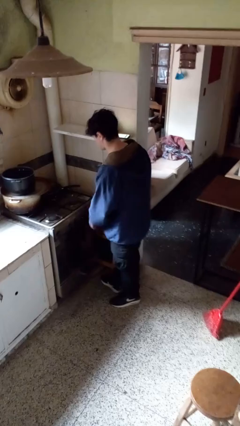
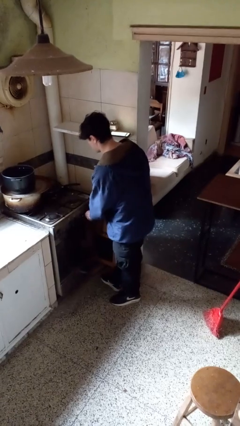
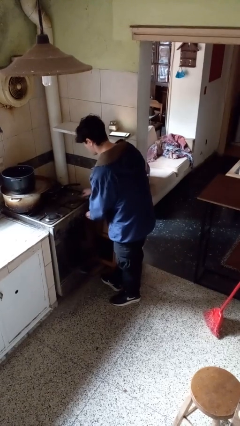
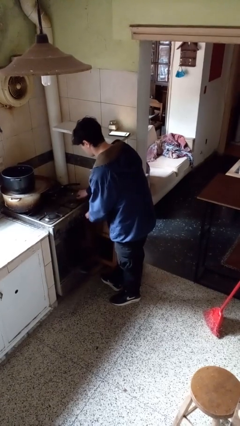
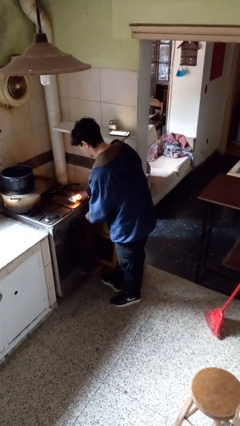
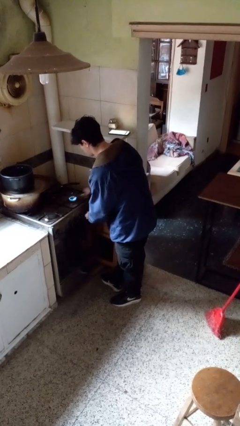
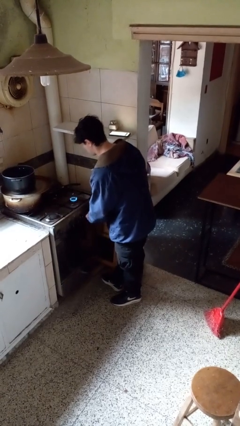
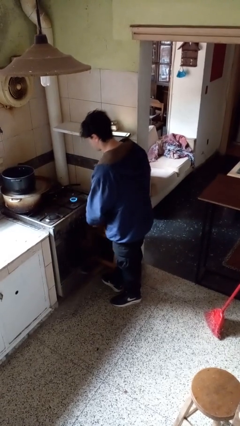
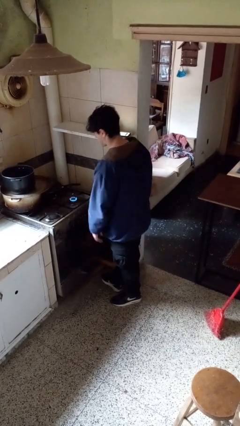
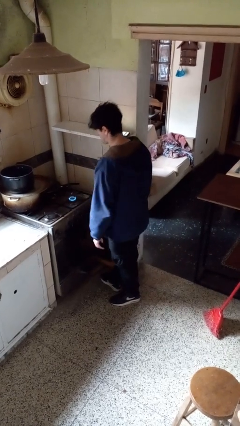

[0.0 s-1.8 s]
person turns on stovetop

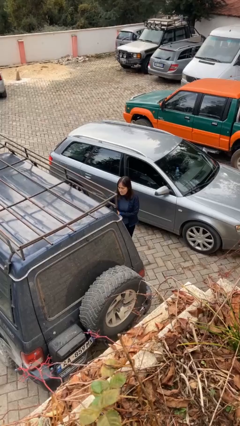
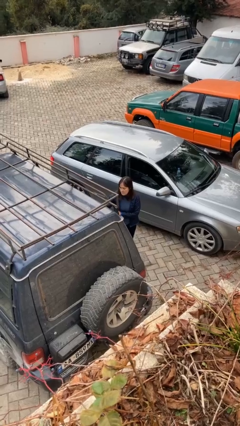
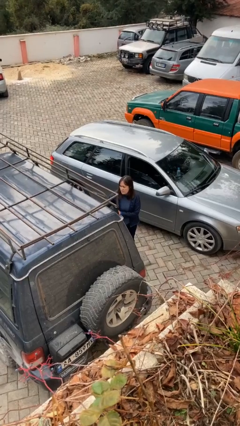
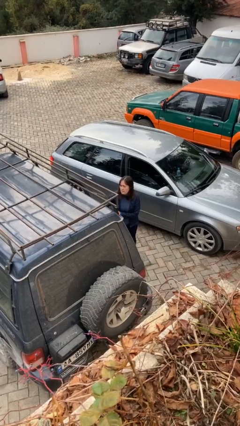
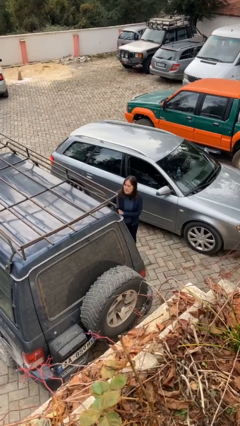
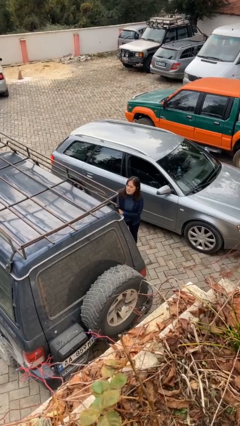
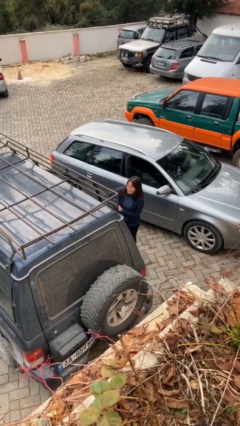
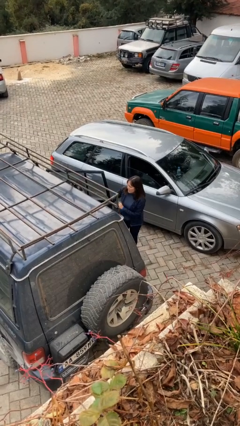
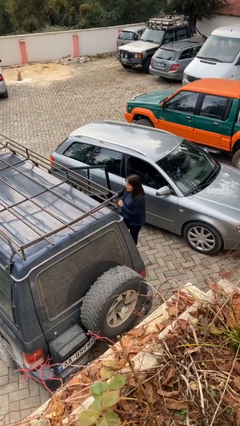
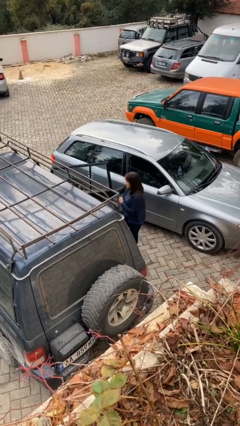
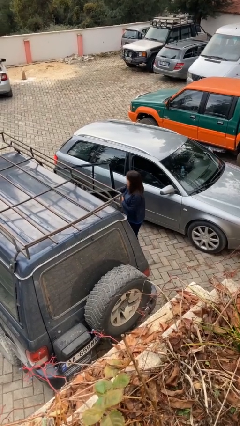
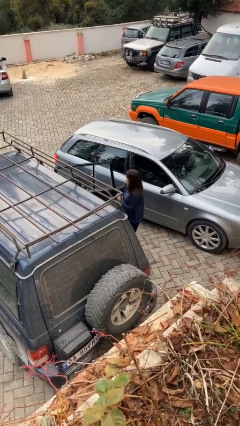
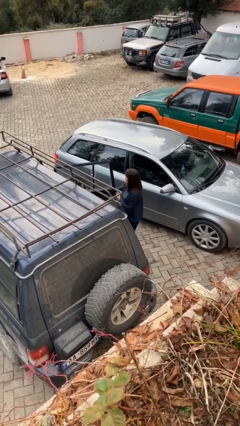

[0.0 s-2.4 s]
person opens car door

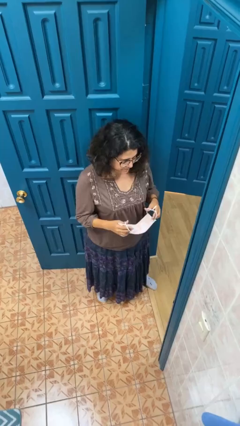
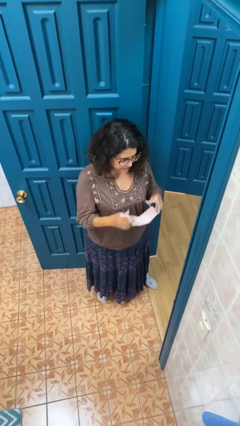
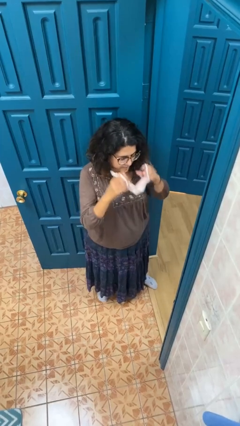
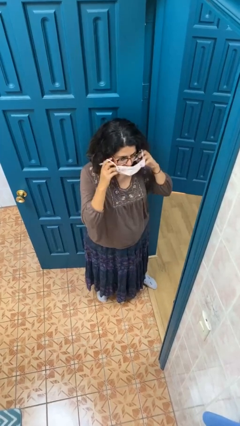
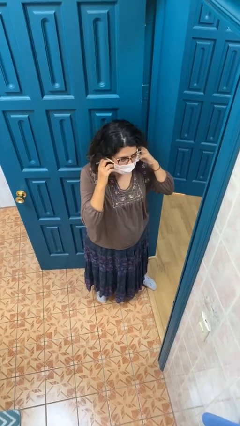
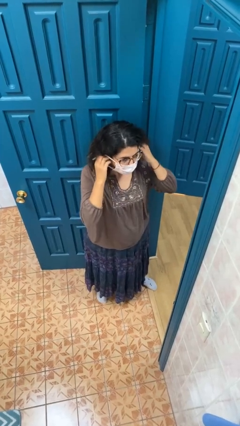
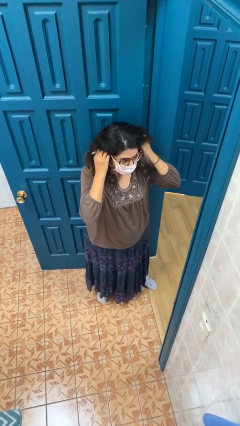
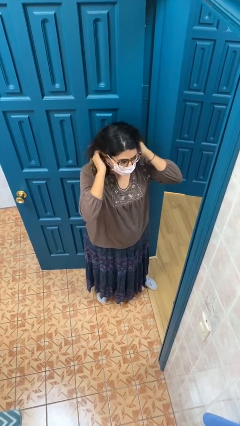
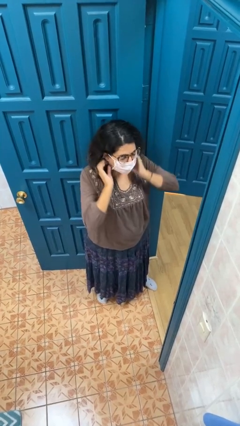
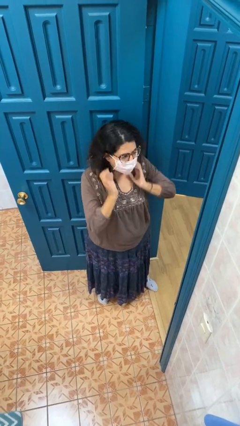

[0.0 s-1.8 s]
person puts on facemask

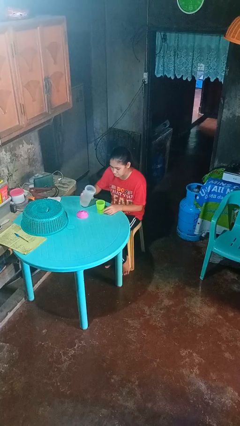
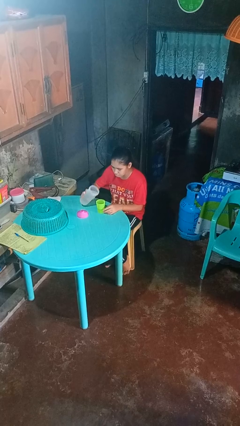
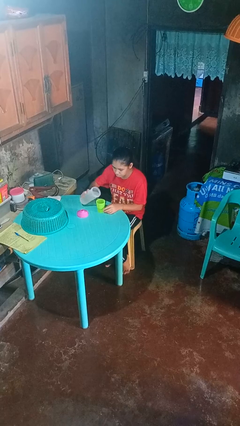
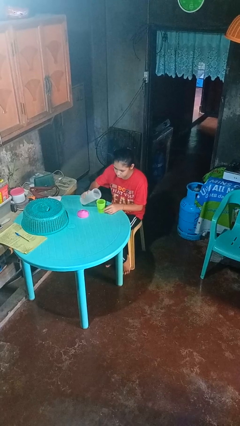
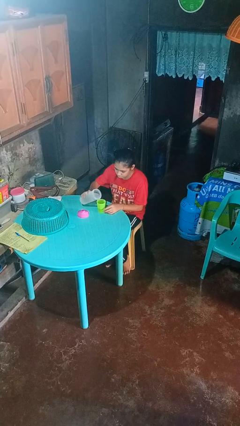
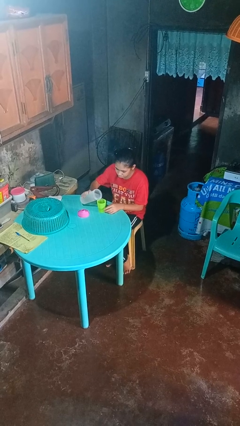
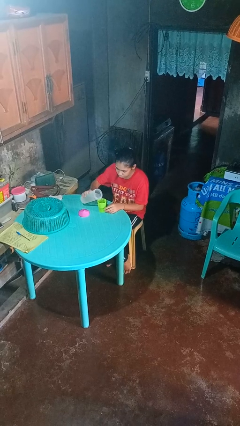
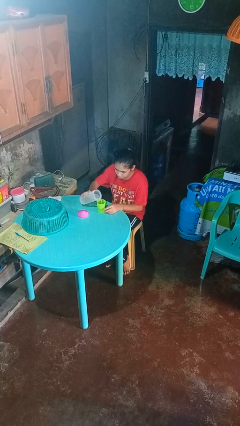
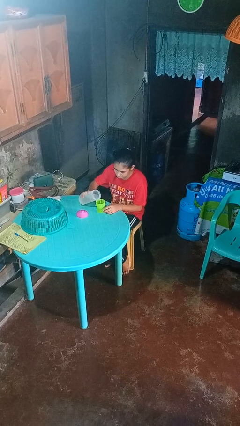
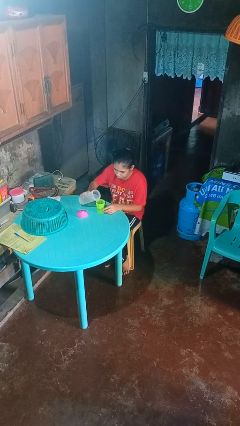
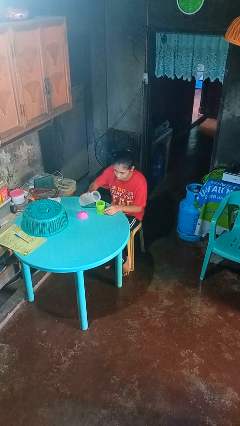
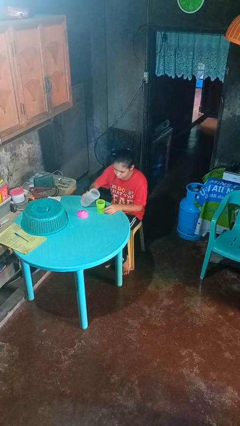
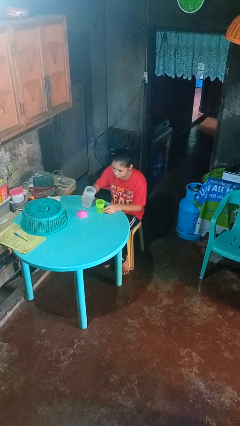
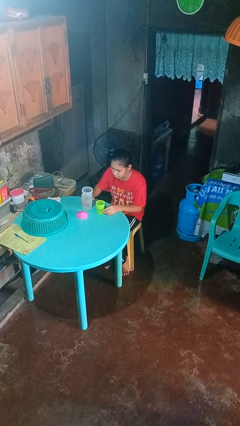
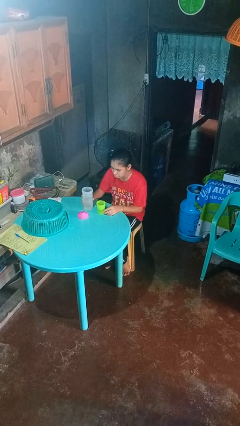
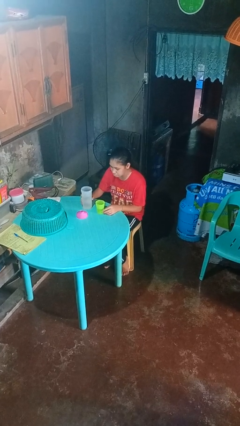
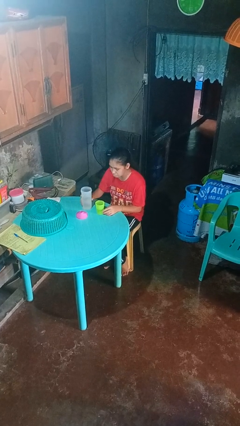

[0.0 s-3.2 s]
person pours liquid into cup

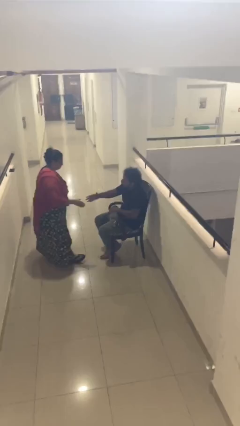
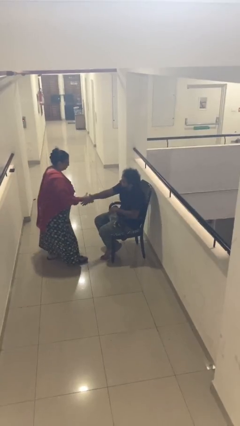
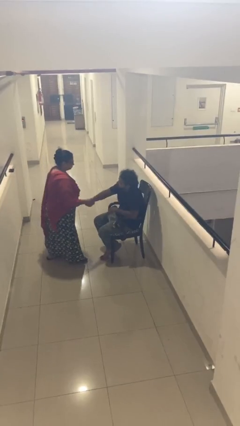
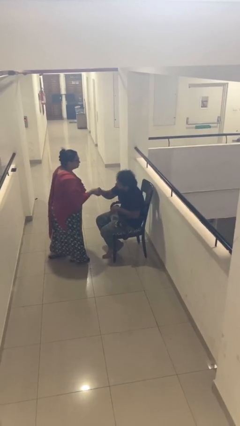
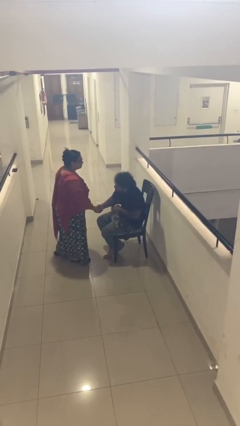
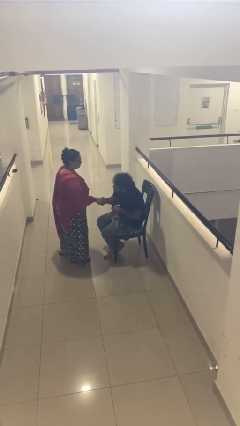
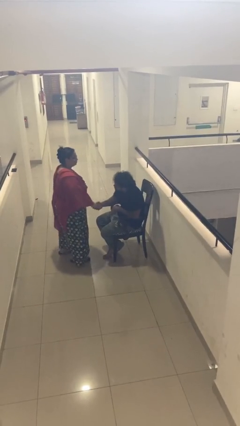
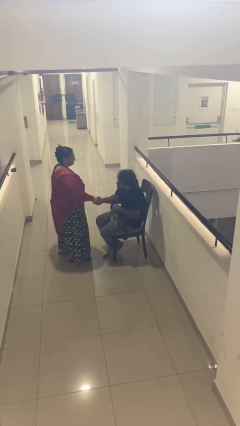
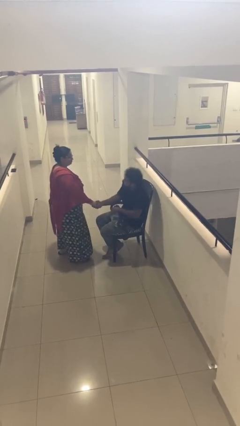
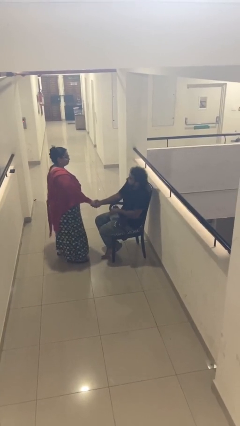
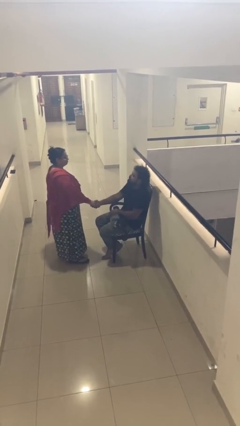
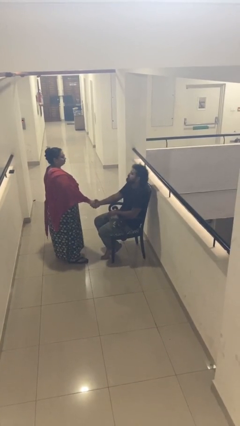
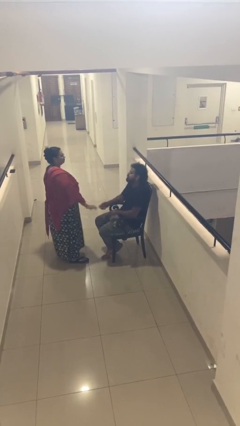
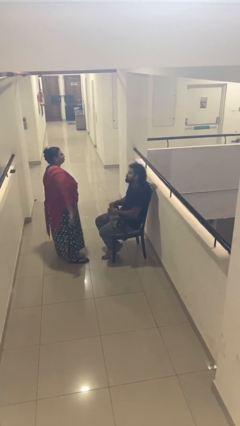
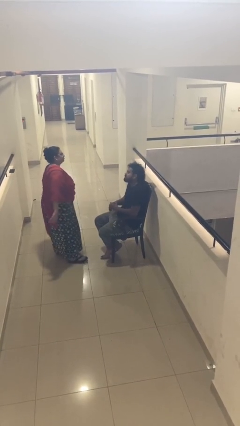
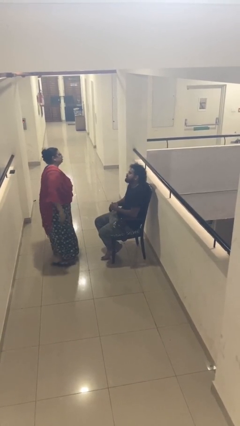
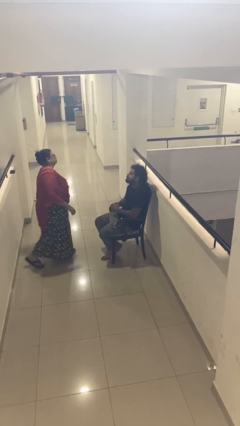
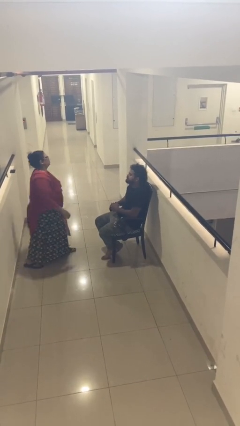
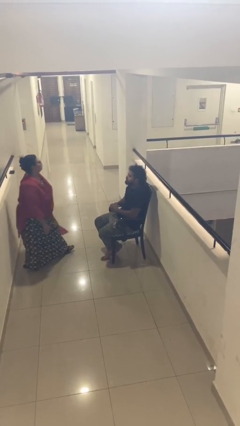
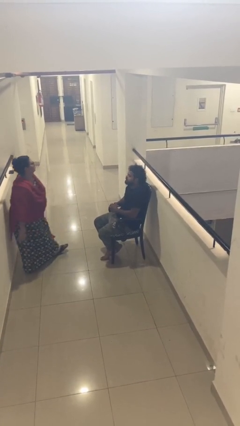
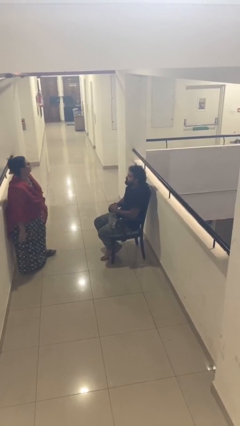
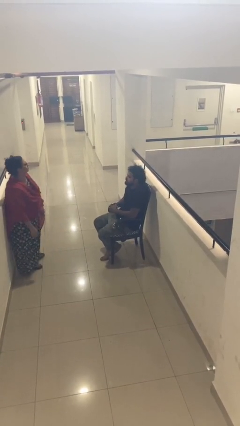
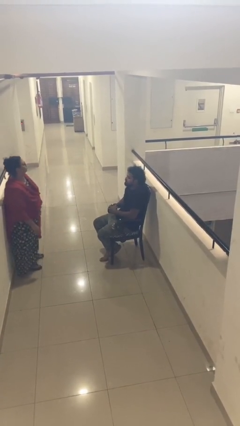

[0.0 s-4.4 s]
person shakes hand

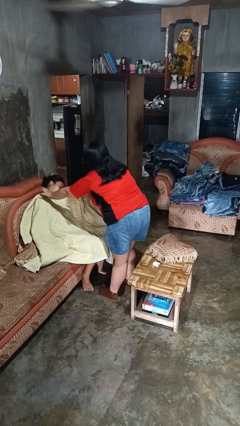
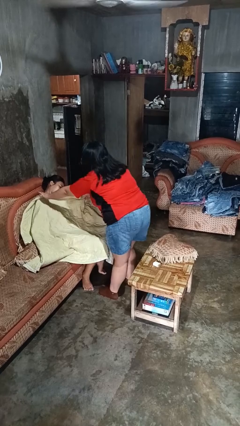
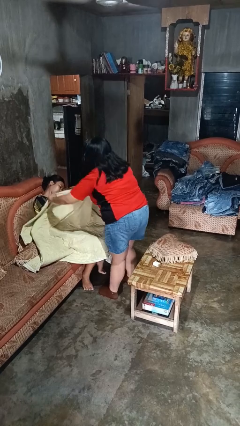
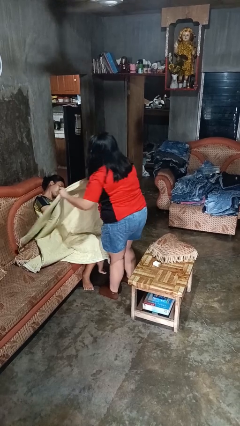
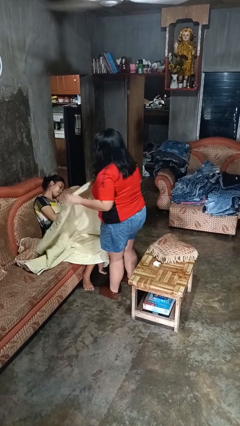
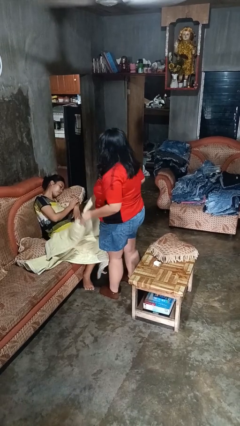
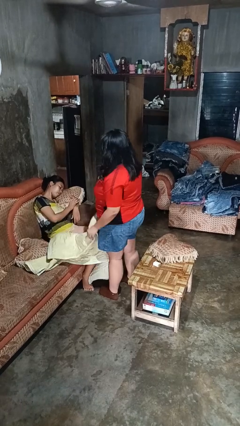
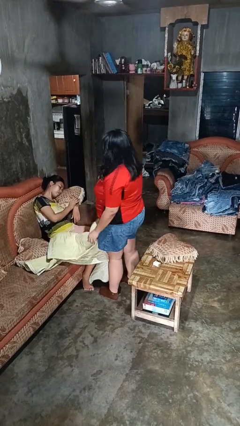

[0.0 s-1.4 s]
person uncovers friend with blanket

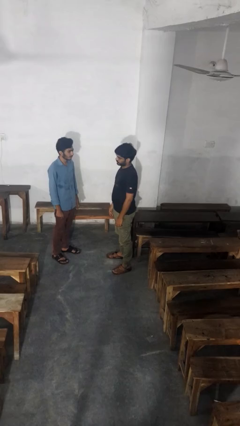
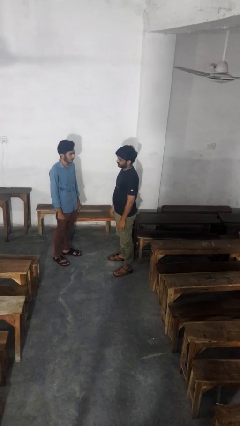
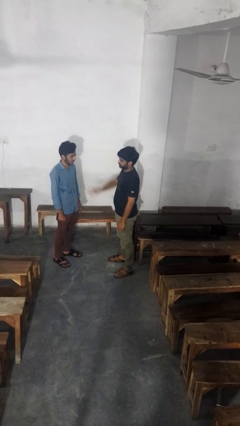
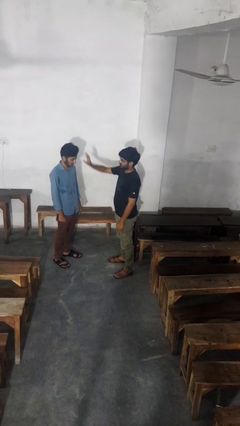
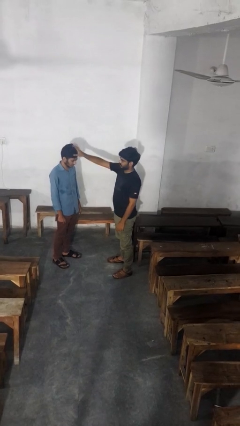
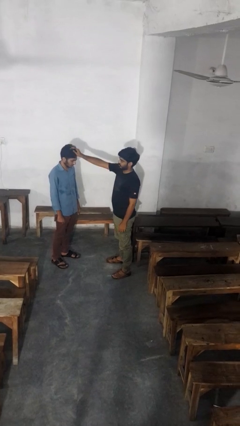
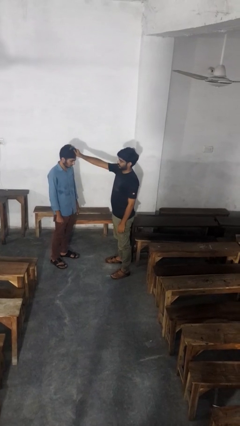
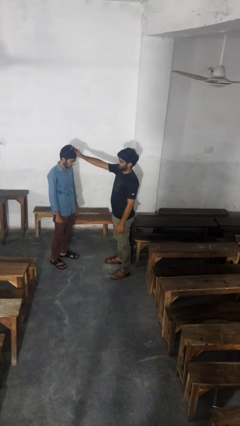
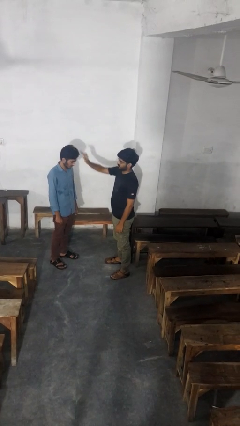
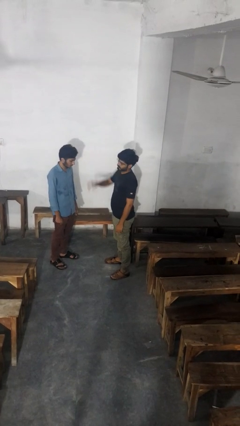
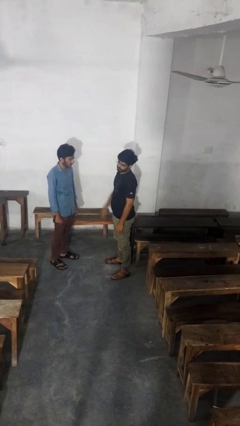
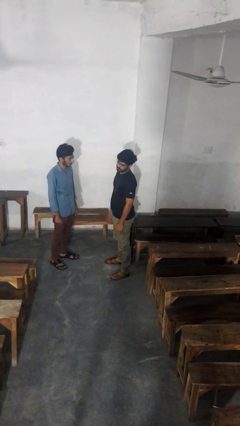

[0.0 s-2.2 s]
person grabs person by hair
